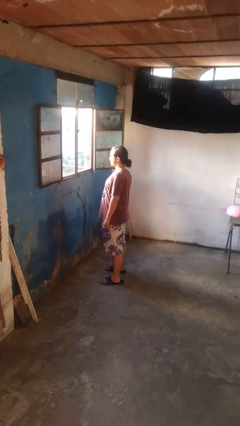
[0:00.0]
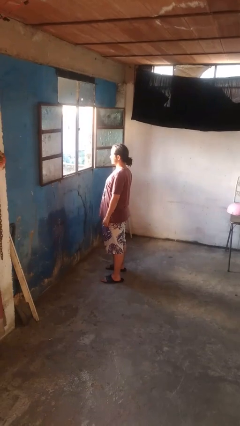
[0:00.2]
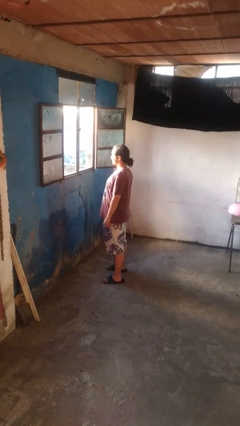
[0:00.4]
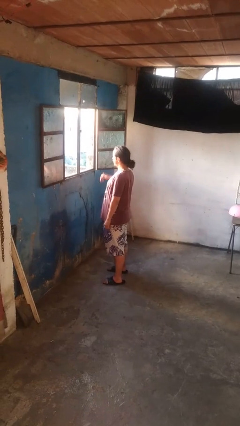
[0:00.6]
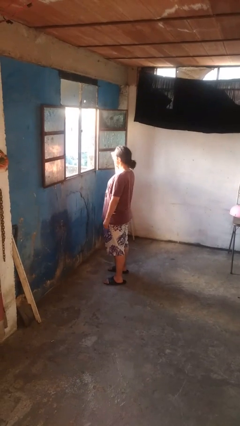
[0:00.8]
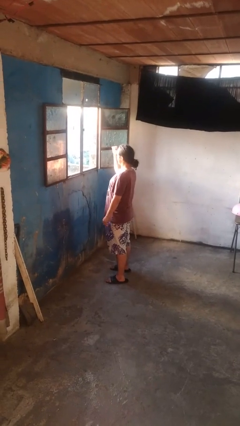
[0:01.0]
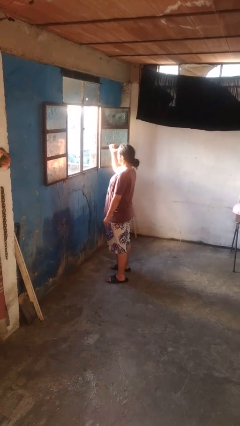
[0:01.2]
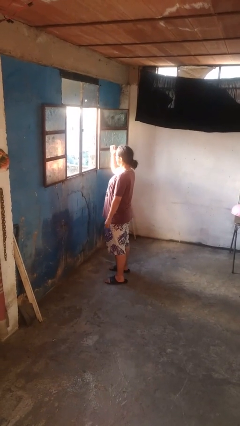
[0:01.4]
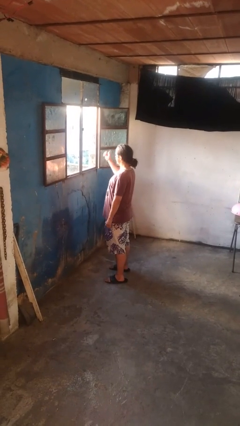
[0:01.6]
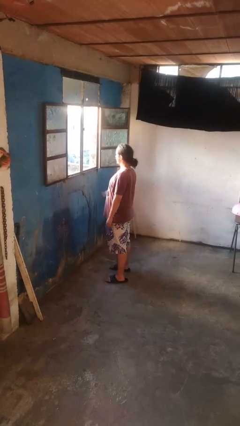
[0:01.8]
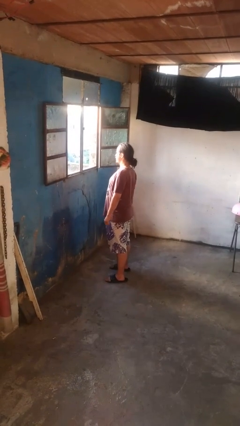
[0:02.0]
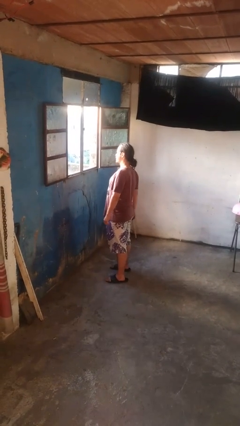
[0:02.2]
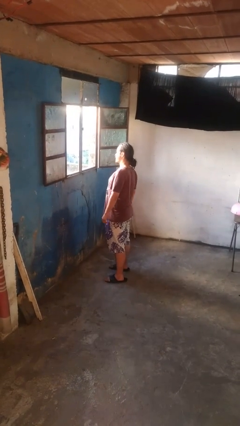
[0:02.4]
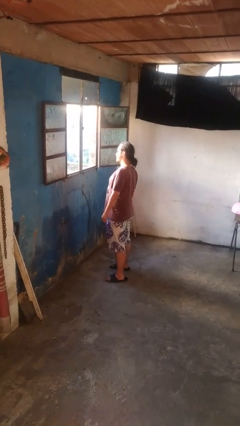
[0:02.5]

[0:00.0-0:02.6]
person gestures behind me

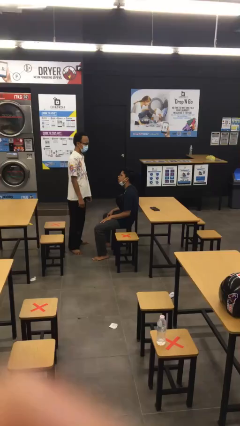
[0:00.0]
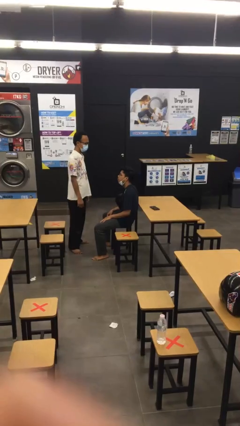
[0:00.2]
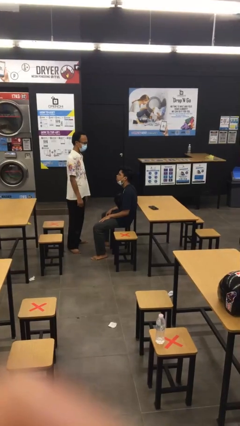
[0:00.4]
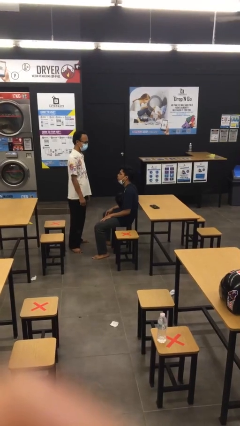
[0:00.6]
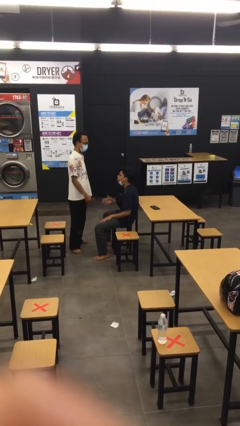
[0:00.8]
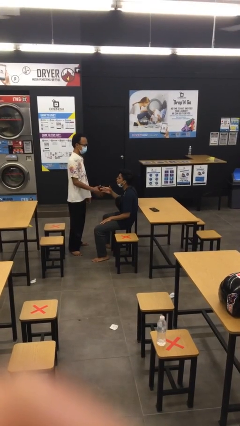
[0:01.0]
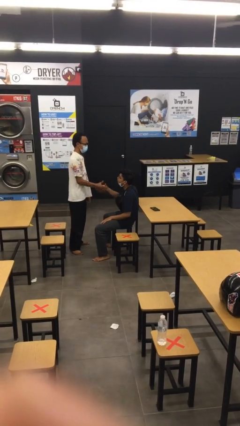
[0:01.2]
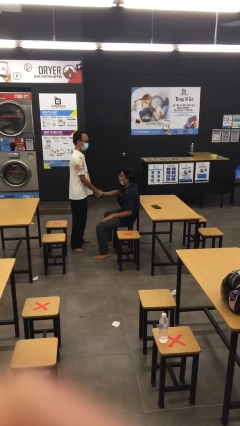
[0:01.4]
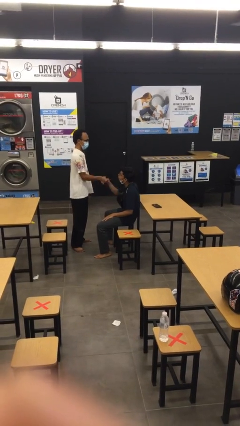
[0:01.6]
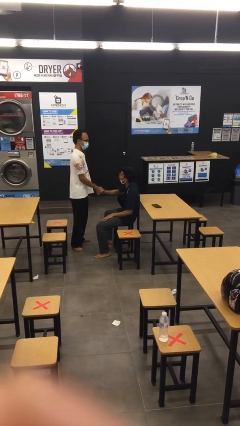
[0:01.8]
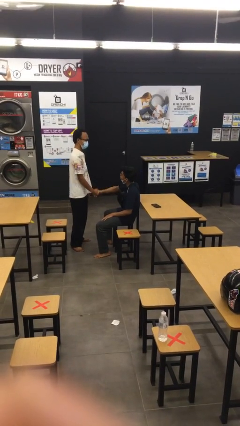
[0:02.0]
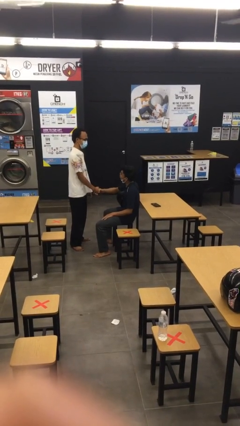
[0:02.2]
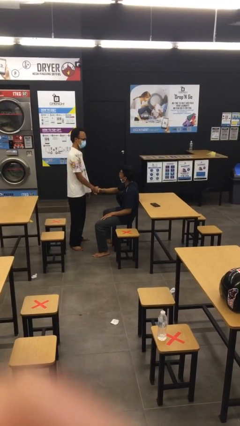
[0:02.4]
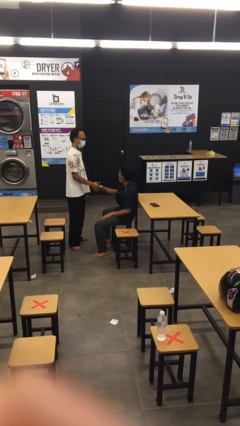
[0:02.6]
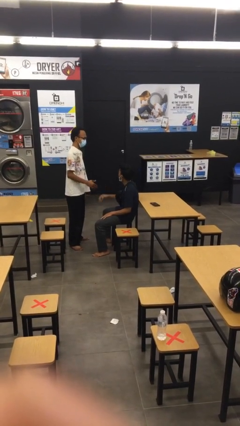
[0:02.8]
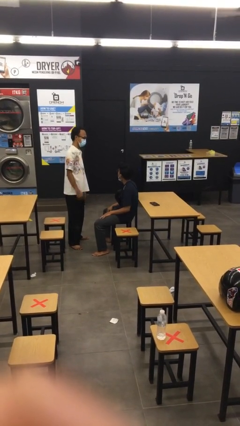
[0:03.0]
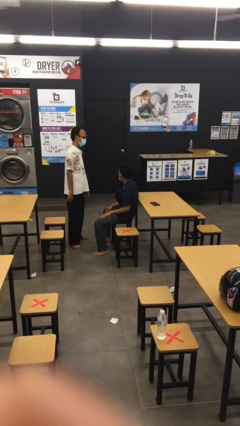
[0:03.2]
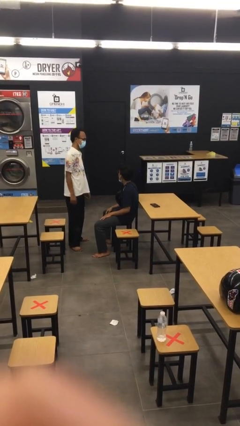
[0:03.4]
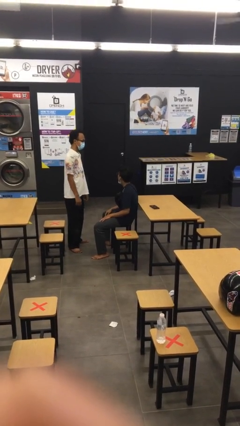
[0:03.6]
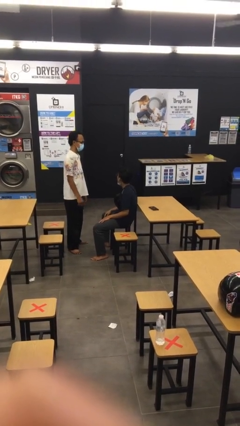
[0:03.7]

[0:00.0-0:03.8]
person shakes hand

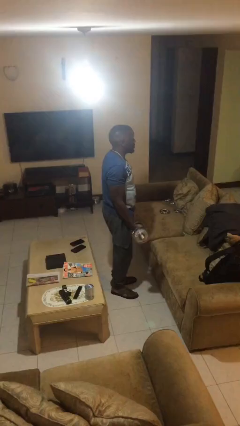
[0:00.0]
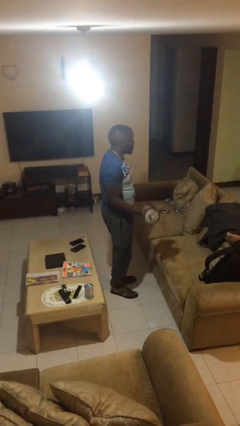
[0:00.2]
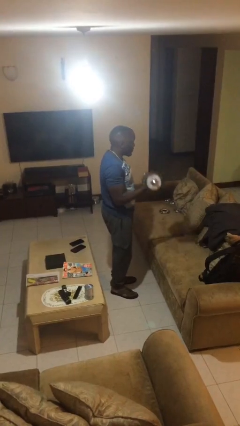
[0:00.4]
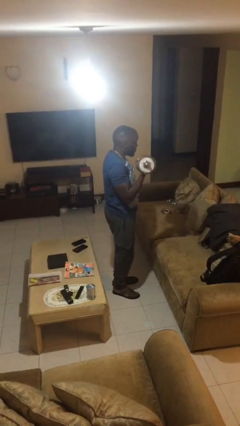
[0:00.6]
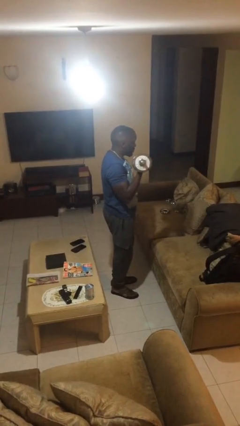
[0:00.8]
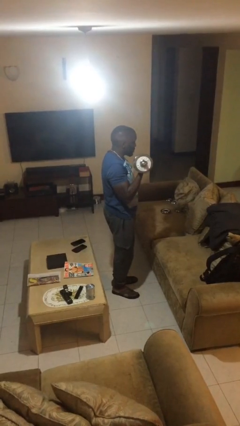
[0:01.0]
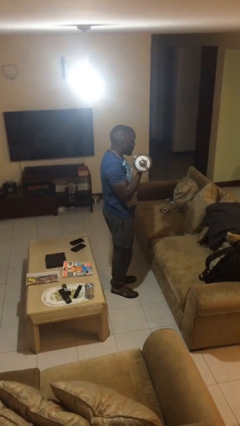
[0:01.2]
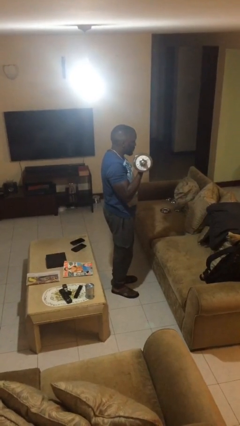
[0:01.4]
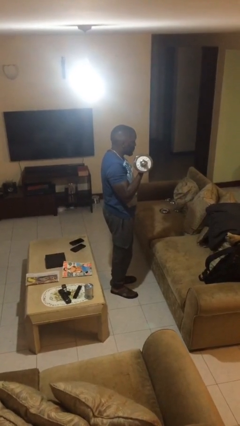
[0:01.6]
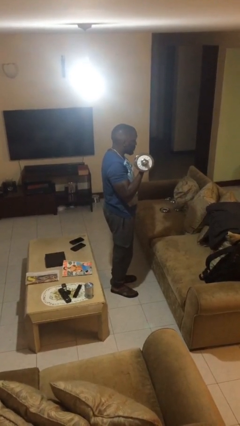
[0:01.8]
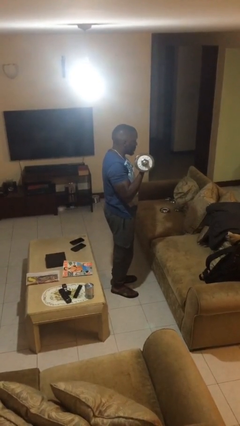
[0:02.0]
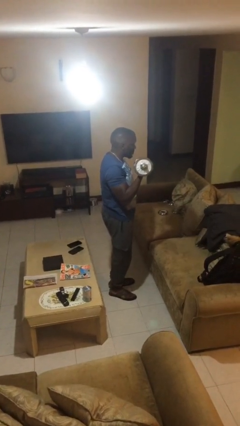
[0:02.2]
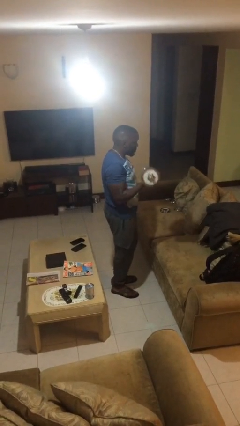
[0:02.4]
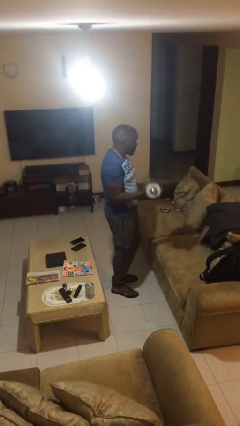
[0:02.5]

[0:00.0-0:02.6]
person lifts dumbbells

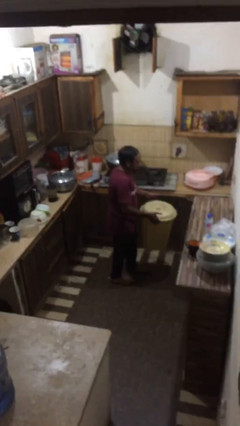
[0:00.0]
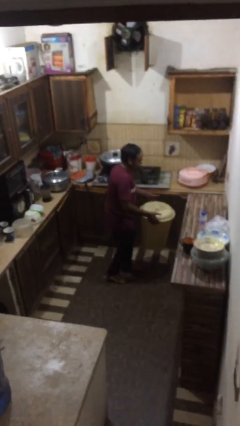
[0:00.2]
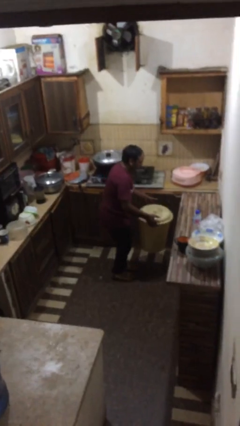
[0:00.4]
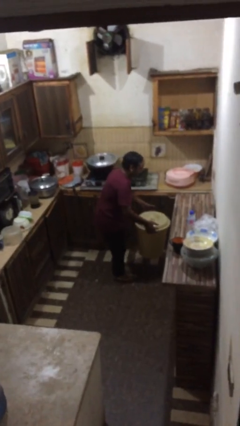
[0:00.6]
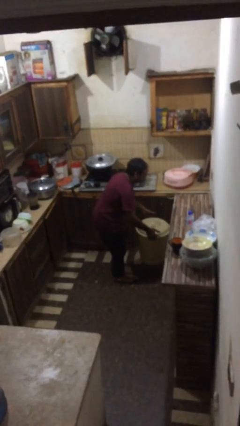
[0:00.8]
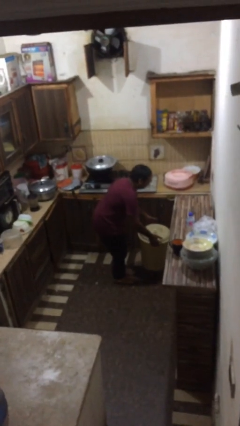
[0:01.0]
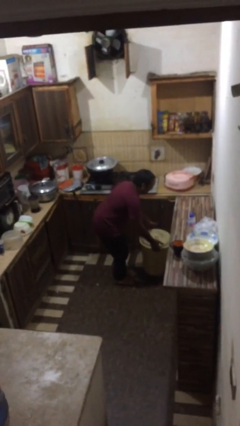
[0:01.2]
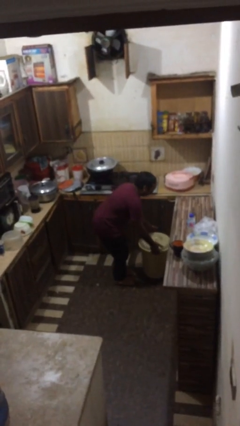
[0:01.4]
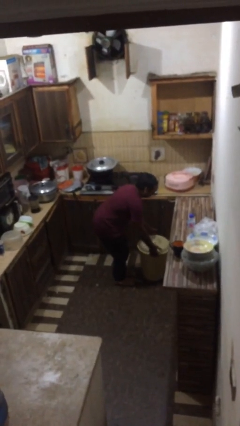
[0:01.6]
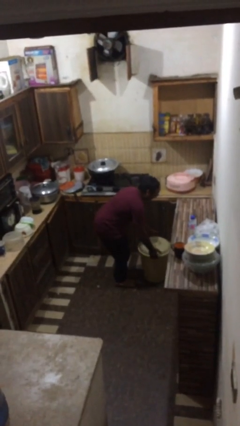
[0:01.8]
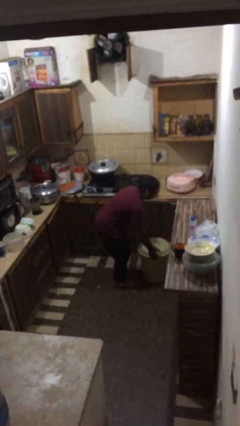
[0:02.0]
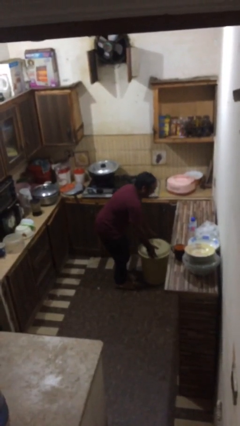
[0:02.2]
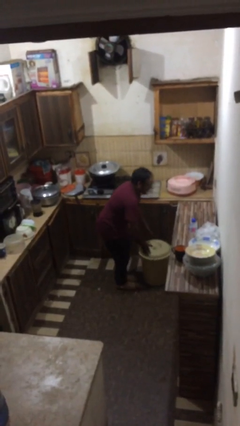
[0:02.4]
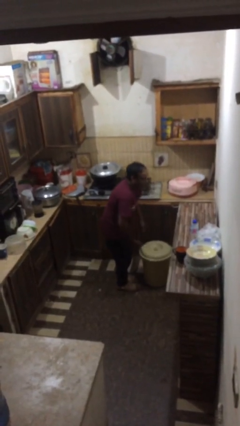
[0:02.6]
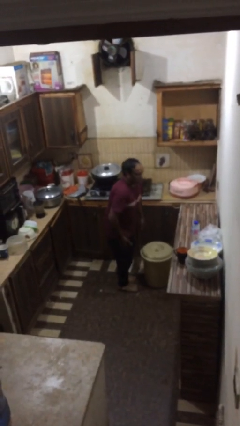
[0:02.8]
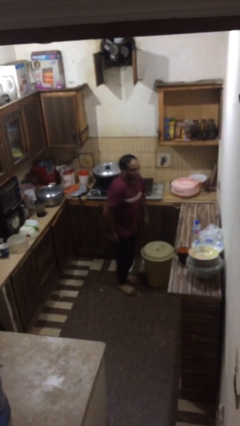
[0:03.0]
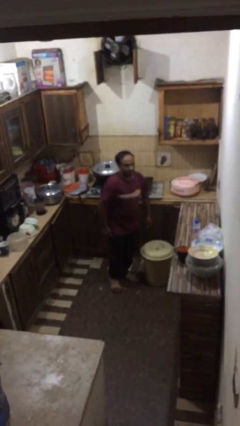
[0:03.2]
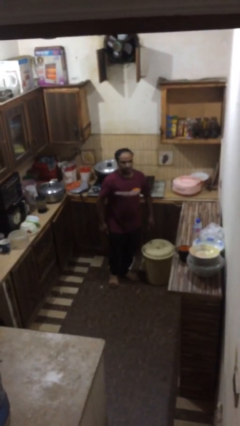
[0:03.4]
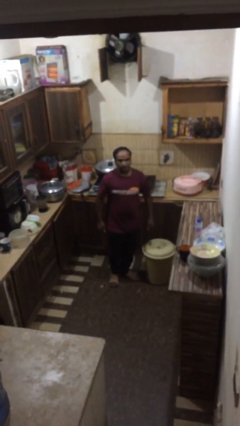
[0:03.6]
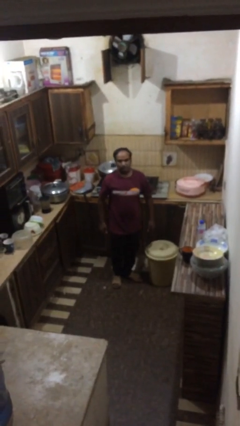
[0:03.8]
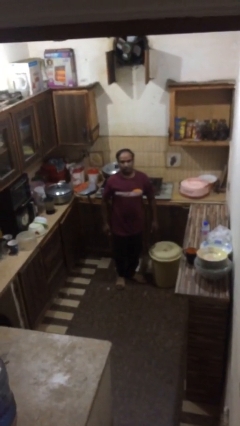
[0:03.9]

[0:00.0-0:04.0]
person puts down object on floor

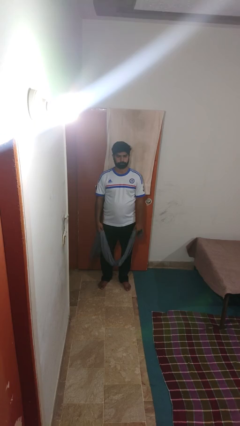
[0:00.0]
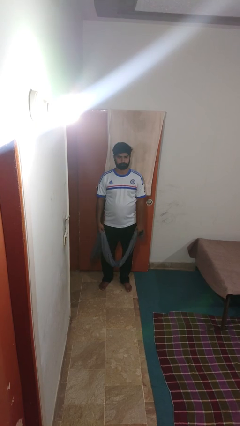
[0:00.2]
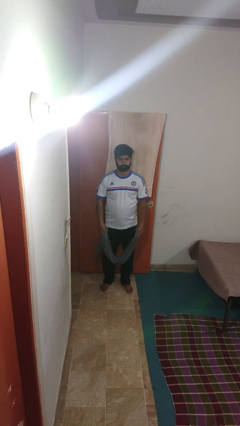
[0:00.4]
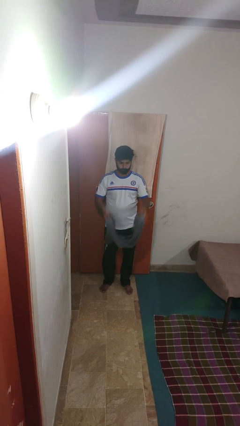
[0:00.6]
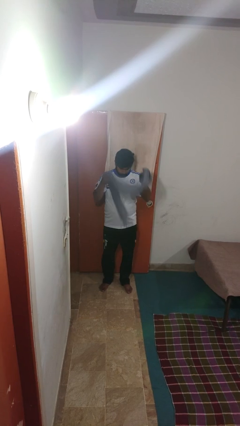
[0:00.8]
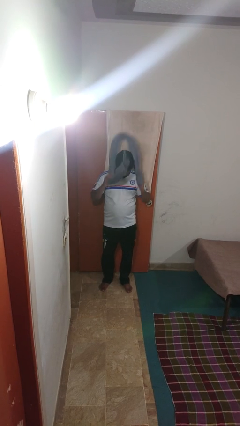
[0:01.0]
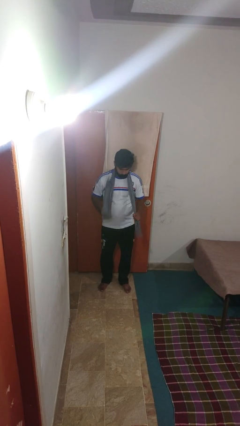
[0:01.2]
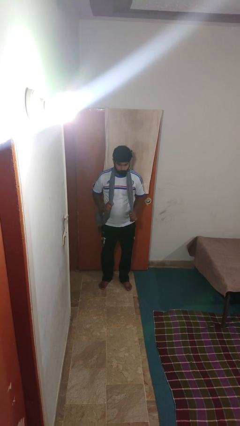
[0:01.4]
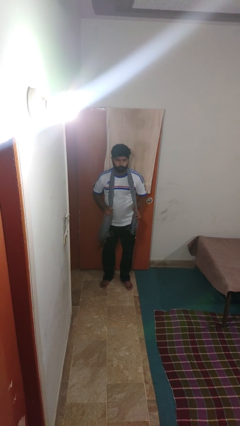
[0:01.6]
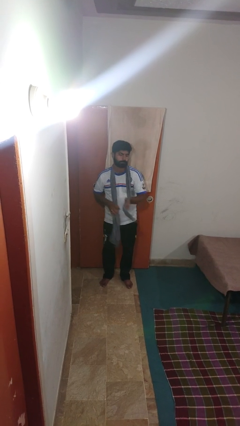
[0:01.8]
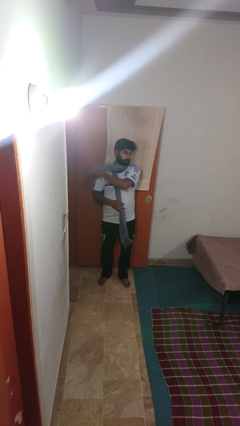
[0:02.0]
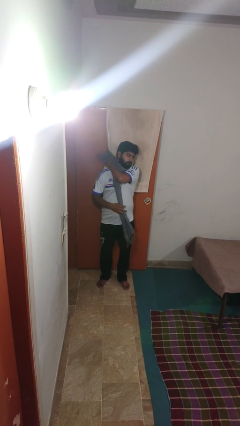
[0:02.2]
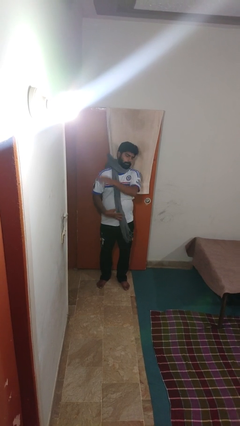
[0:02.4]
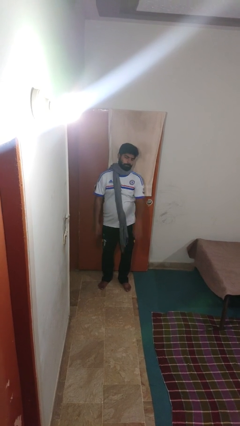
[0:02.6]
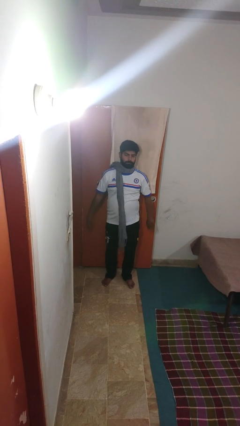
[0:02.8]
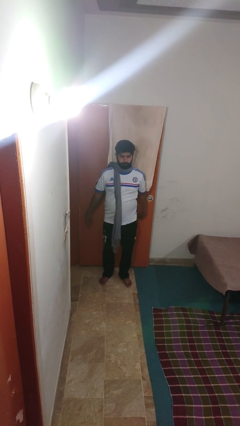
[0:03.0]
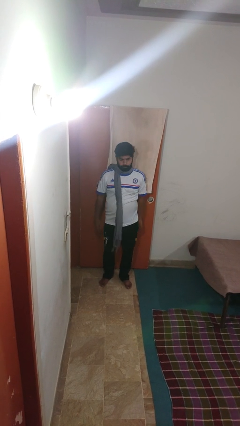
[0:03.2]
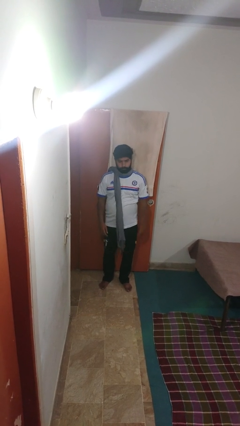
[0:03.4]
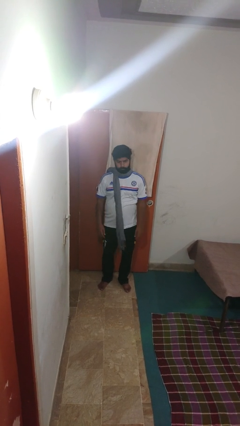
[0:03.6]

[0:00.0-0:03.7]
person puts on scarf

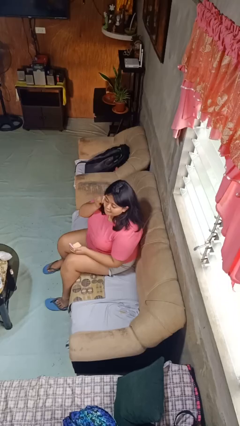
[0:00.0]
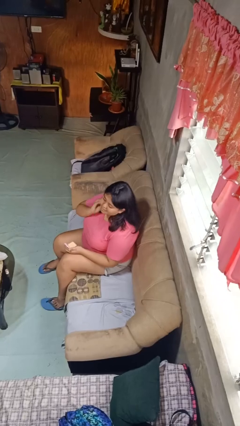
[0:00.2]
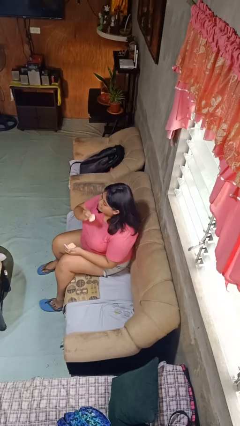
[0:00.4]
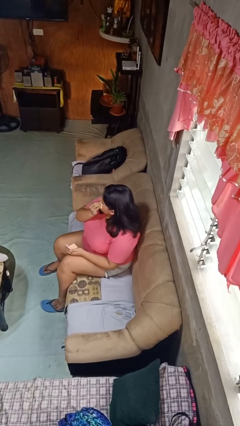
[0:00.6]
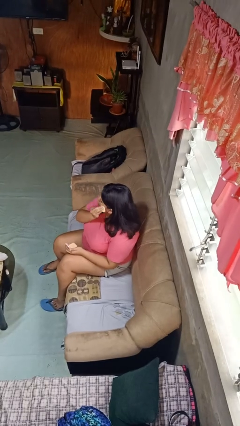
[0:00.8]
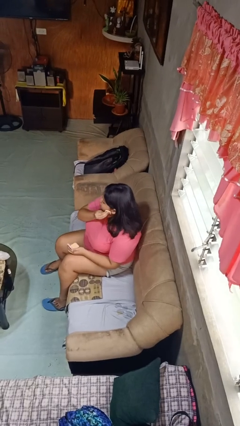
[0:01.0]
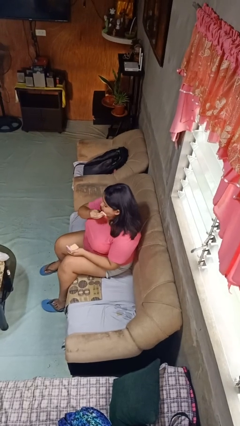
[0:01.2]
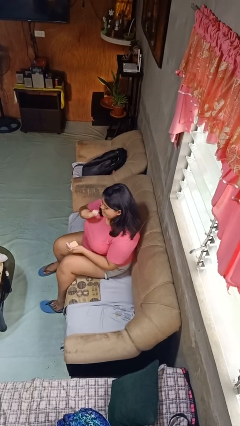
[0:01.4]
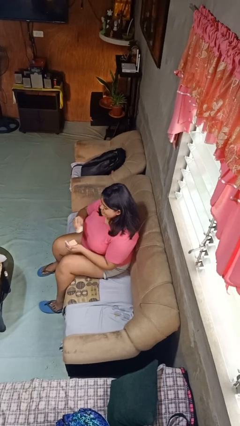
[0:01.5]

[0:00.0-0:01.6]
person applies foundation makeup
